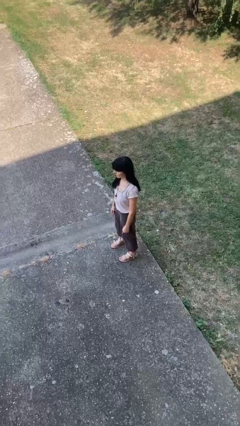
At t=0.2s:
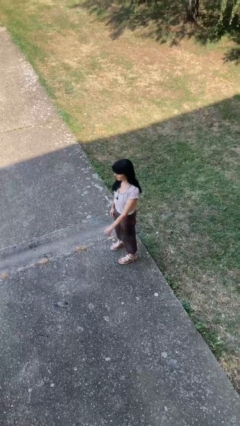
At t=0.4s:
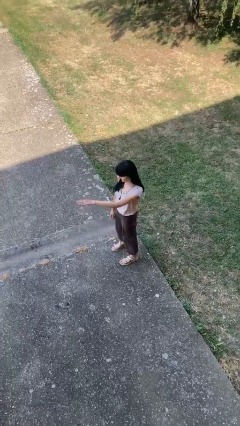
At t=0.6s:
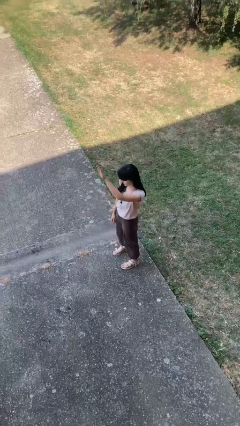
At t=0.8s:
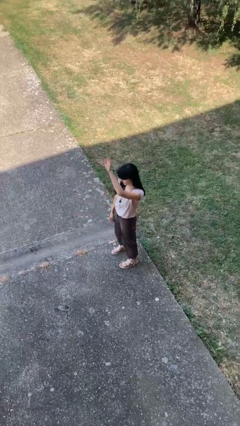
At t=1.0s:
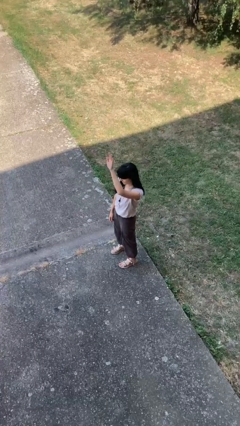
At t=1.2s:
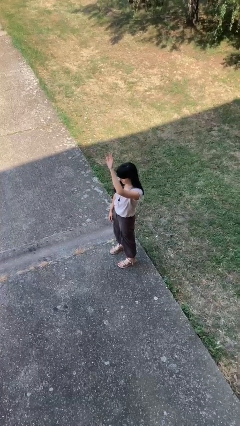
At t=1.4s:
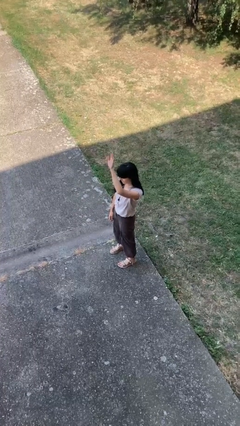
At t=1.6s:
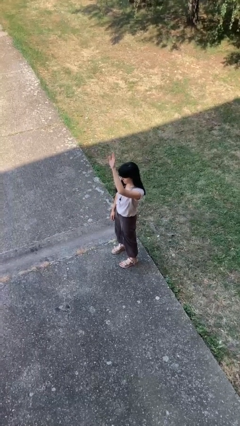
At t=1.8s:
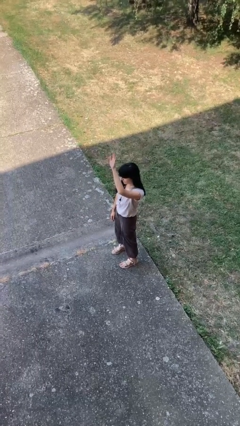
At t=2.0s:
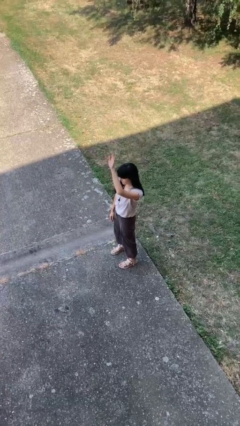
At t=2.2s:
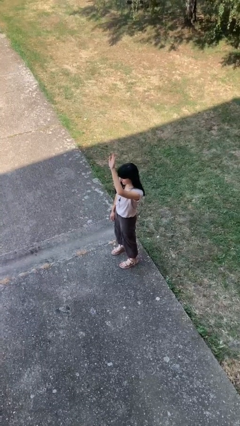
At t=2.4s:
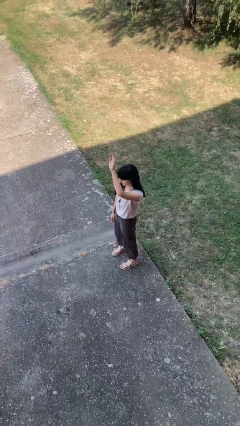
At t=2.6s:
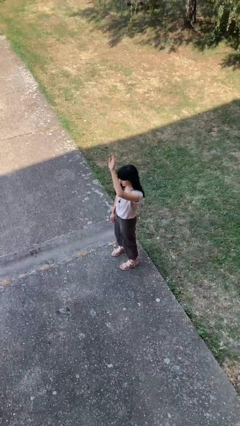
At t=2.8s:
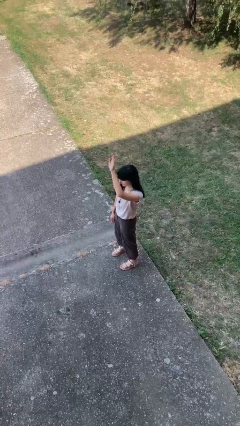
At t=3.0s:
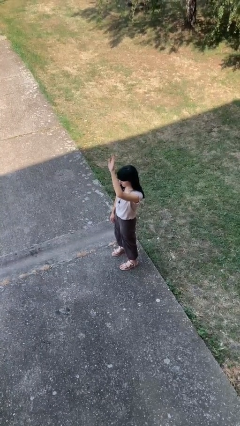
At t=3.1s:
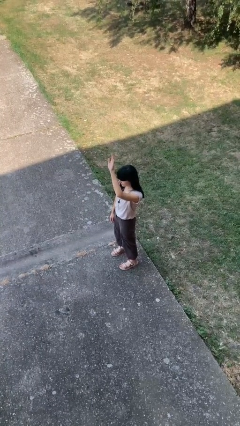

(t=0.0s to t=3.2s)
person gestures raise hand

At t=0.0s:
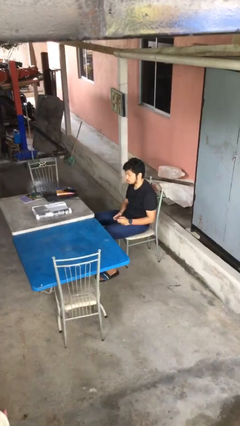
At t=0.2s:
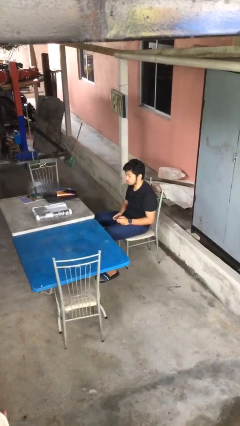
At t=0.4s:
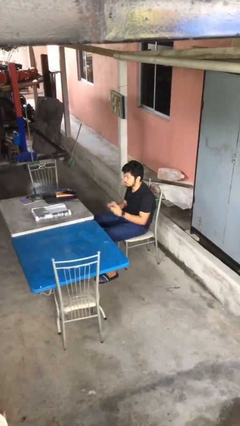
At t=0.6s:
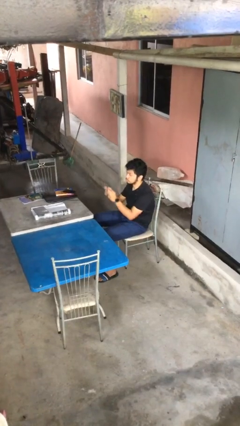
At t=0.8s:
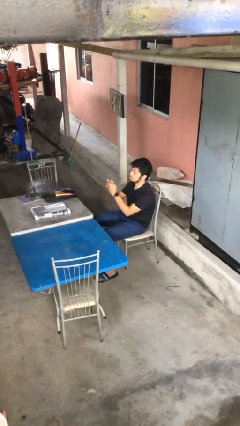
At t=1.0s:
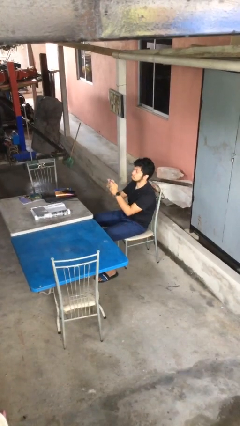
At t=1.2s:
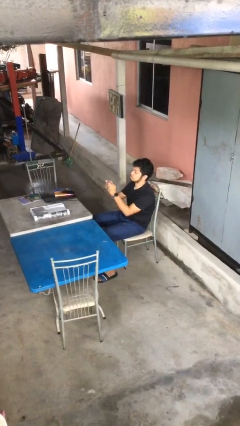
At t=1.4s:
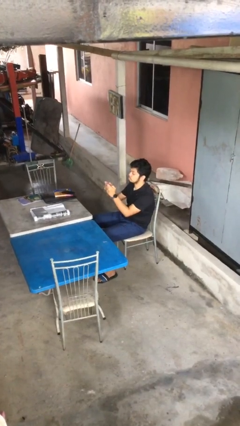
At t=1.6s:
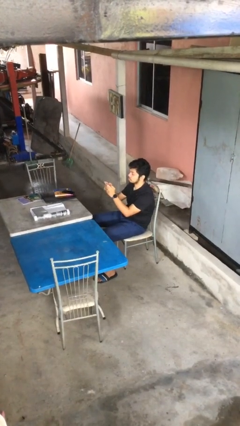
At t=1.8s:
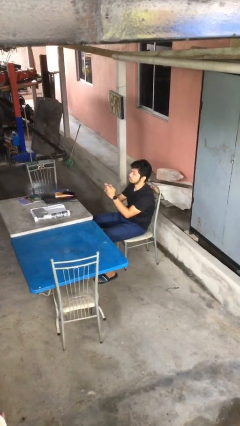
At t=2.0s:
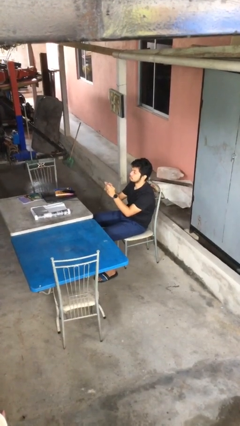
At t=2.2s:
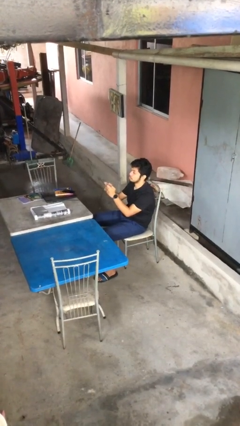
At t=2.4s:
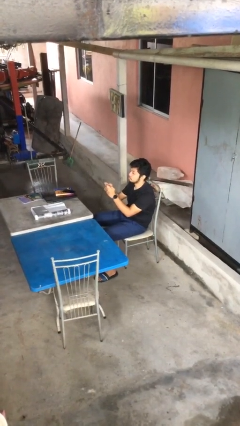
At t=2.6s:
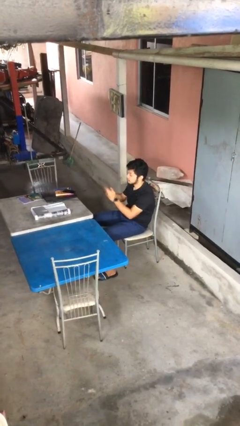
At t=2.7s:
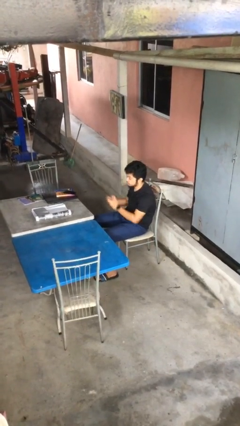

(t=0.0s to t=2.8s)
person interacts with handheld game

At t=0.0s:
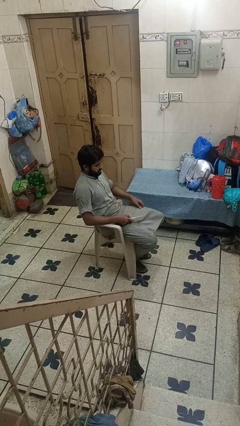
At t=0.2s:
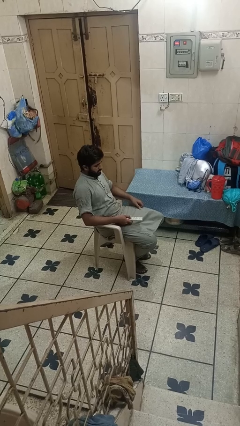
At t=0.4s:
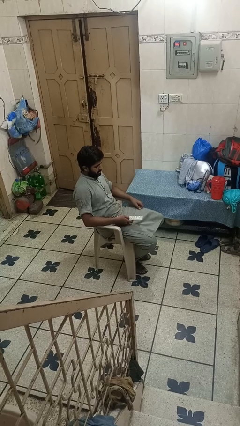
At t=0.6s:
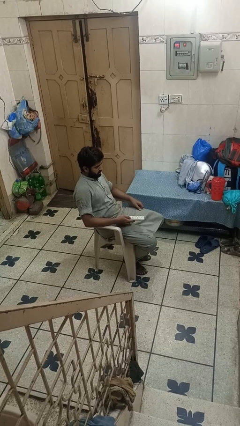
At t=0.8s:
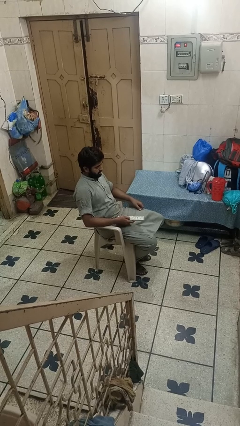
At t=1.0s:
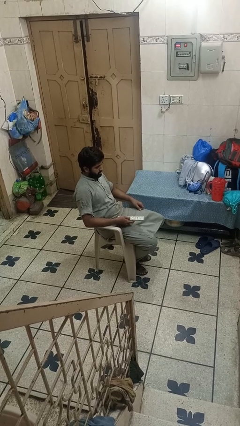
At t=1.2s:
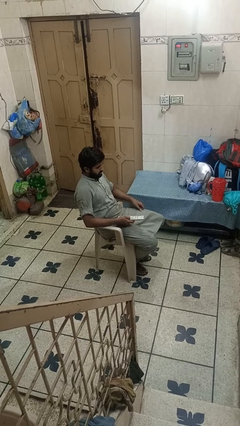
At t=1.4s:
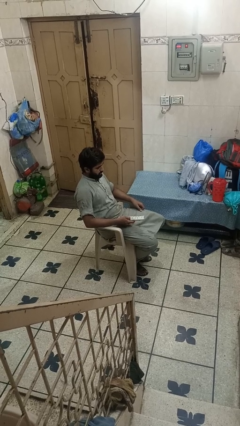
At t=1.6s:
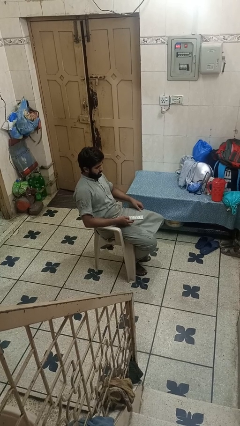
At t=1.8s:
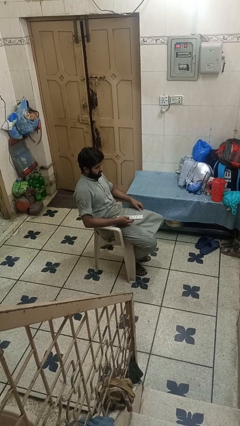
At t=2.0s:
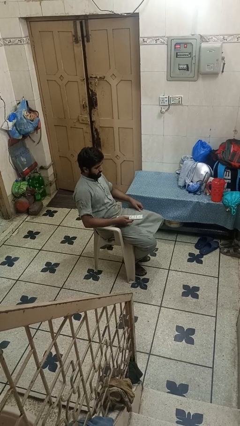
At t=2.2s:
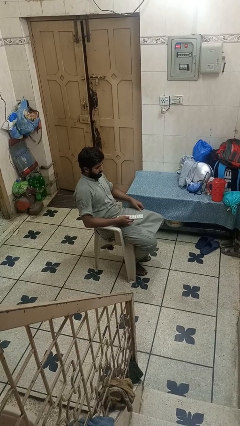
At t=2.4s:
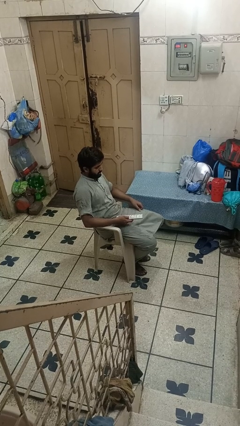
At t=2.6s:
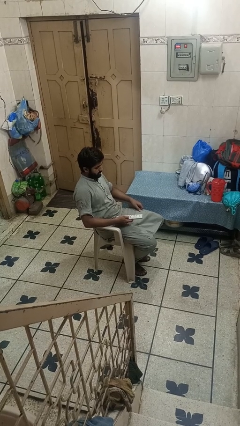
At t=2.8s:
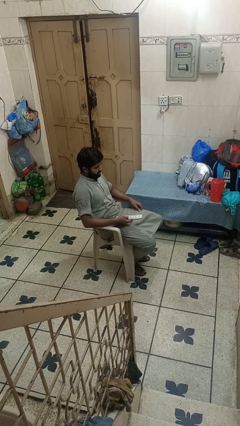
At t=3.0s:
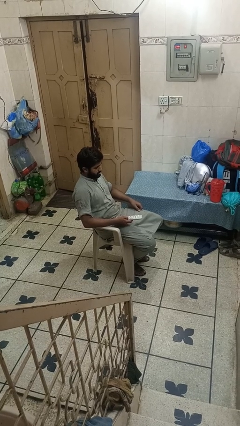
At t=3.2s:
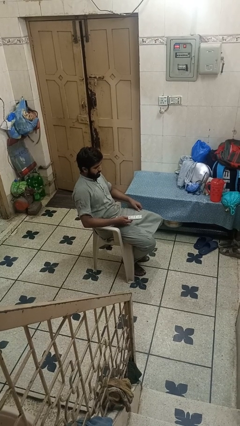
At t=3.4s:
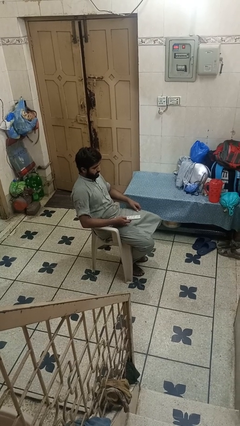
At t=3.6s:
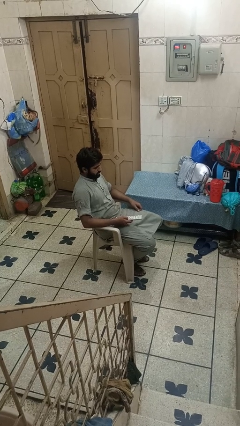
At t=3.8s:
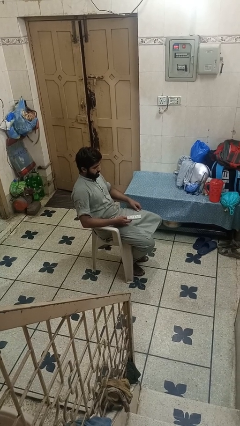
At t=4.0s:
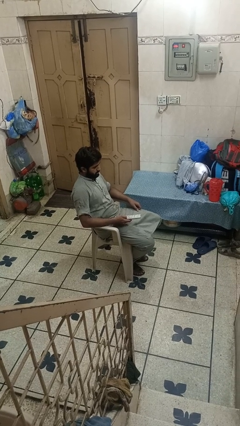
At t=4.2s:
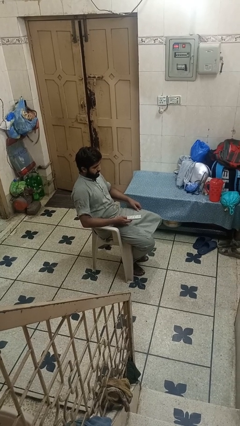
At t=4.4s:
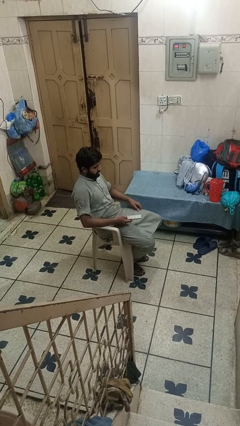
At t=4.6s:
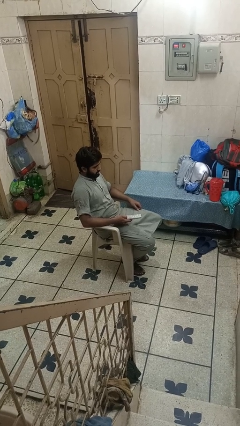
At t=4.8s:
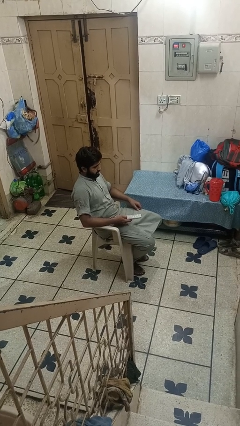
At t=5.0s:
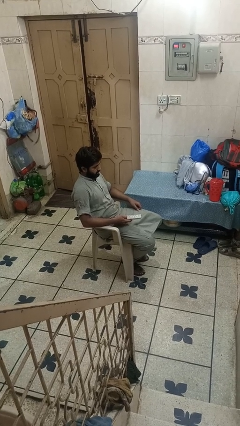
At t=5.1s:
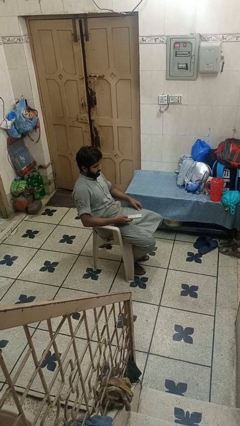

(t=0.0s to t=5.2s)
person uses television remote

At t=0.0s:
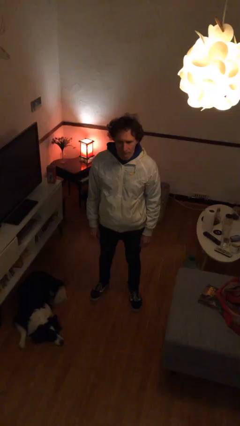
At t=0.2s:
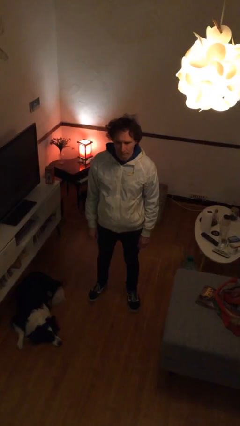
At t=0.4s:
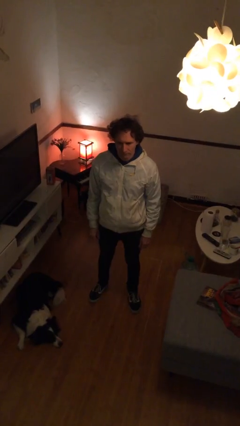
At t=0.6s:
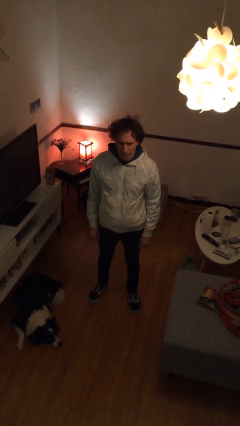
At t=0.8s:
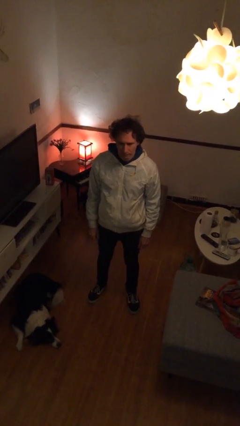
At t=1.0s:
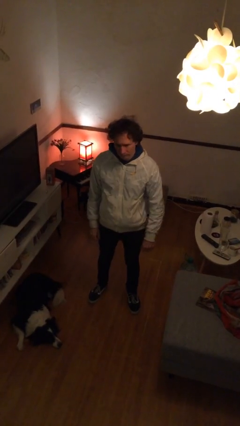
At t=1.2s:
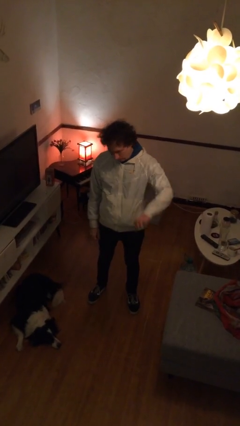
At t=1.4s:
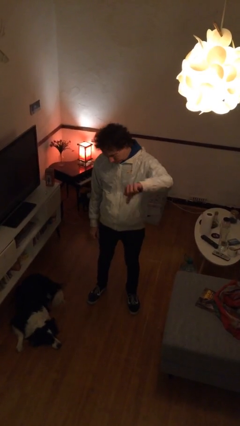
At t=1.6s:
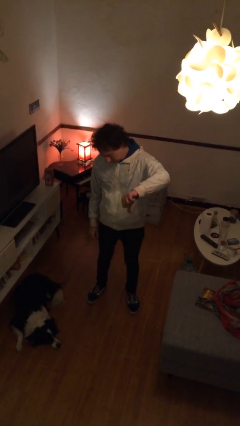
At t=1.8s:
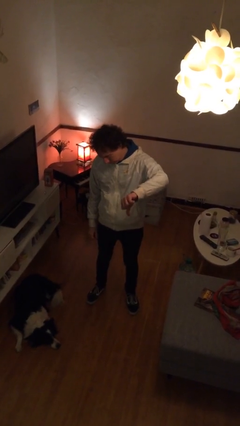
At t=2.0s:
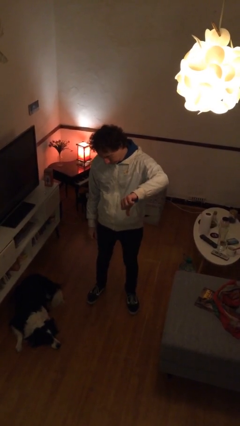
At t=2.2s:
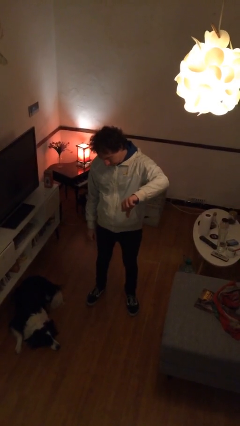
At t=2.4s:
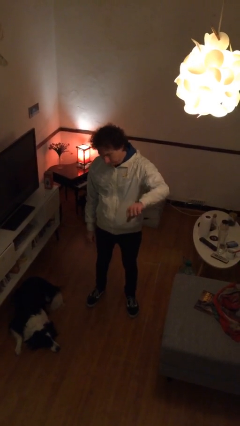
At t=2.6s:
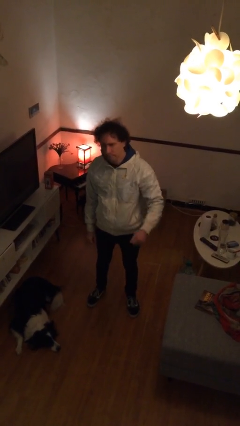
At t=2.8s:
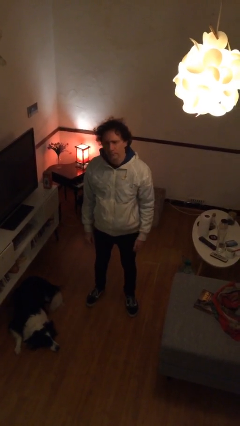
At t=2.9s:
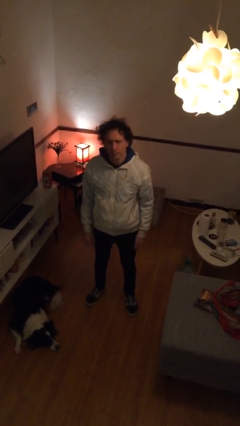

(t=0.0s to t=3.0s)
person gestures thumbs down

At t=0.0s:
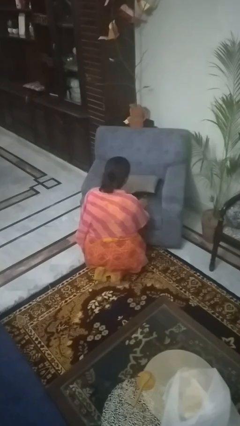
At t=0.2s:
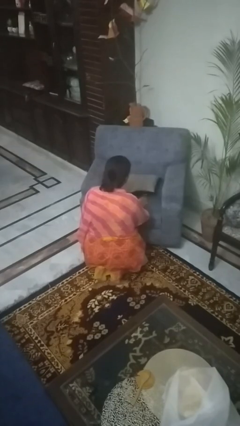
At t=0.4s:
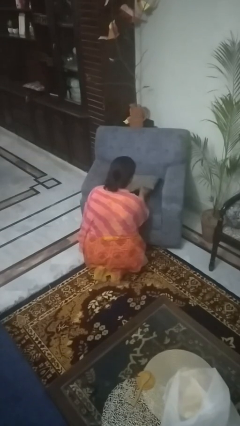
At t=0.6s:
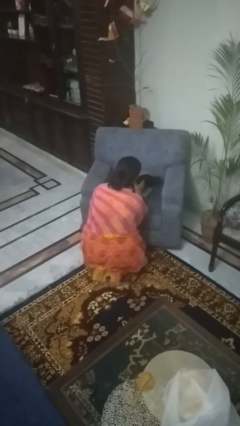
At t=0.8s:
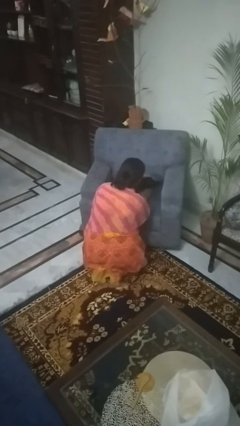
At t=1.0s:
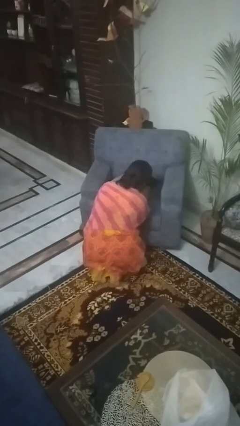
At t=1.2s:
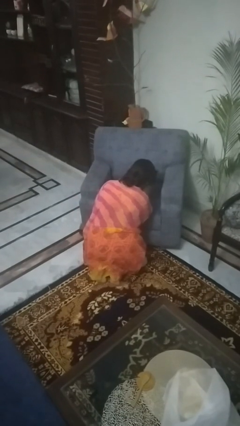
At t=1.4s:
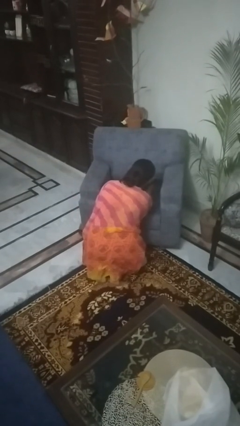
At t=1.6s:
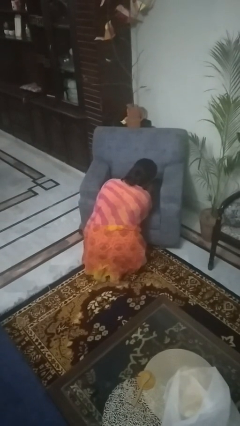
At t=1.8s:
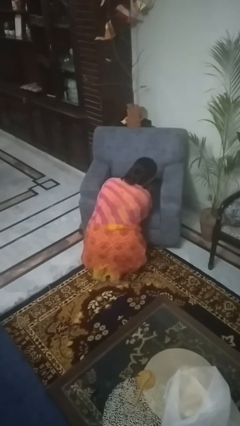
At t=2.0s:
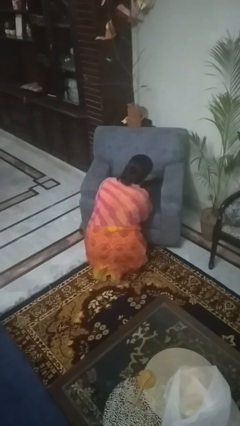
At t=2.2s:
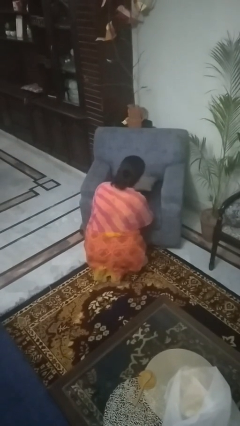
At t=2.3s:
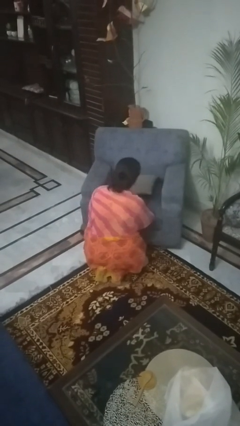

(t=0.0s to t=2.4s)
person searches in couch

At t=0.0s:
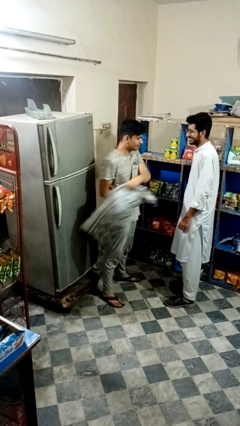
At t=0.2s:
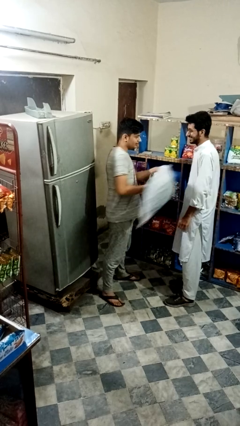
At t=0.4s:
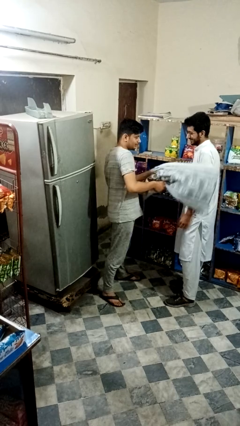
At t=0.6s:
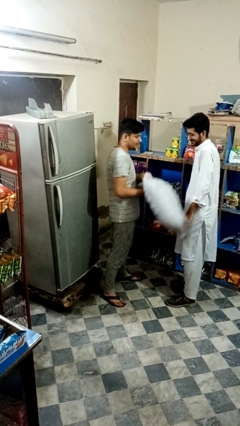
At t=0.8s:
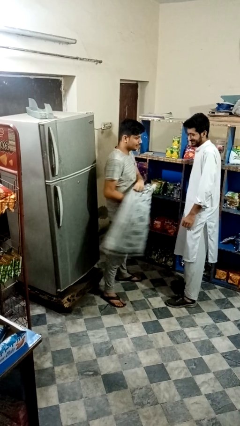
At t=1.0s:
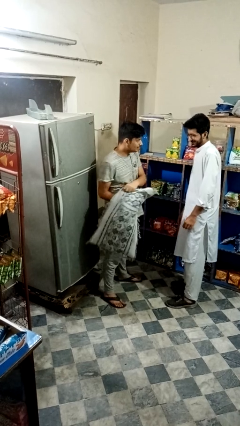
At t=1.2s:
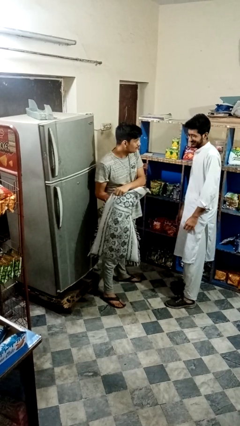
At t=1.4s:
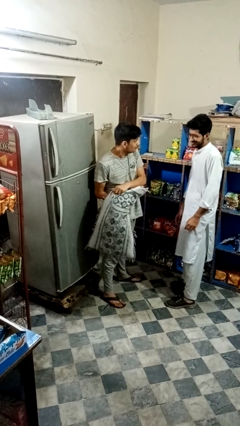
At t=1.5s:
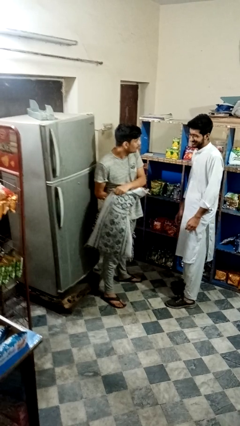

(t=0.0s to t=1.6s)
person hits person with pillow
